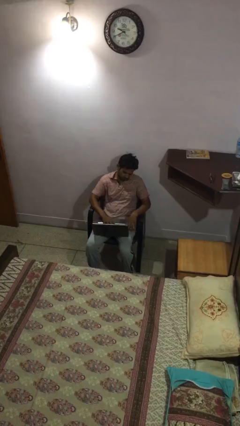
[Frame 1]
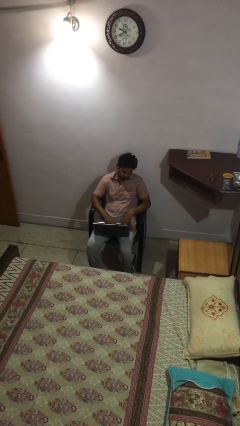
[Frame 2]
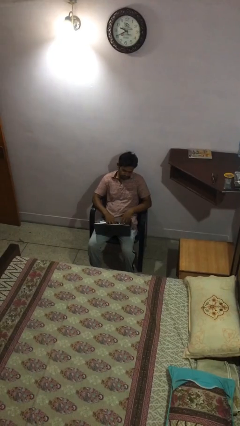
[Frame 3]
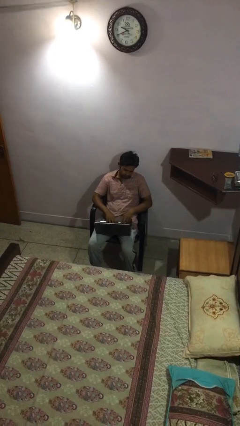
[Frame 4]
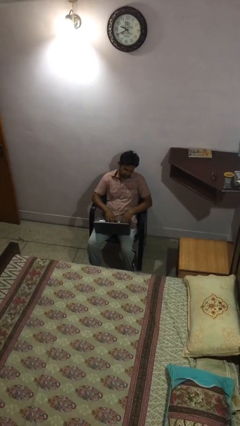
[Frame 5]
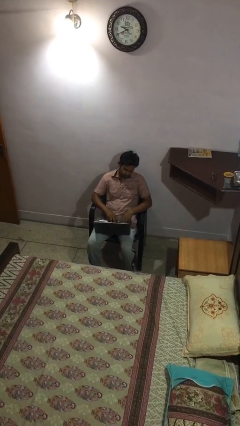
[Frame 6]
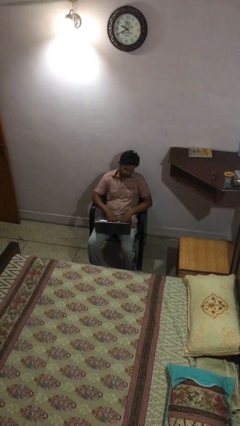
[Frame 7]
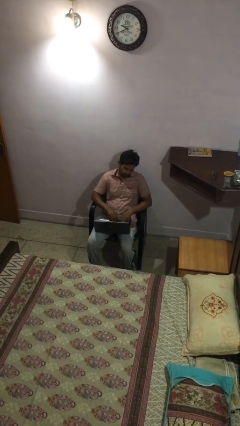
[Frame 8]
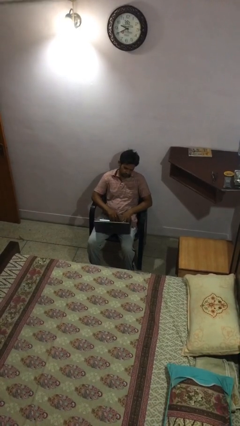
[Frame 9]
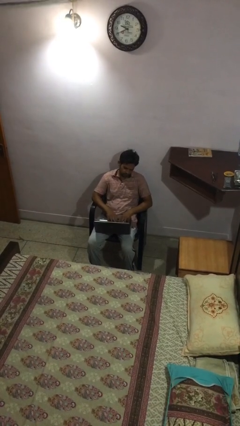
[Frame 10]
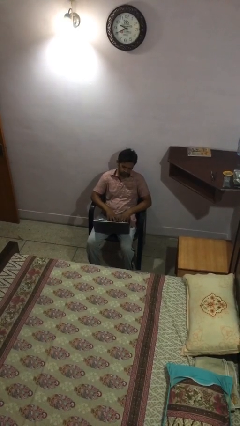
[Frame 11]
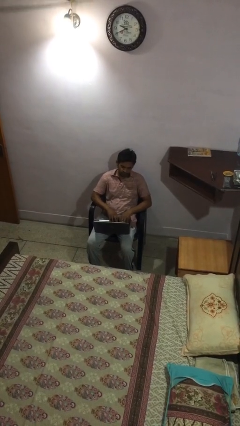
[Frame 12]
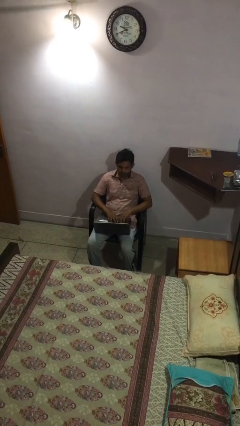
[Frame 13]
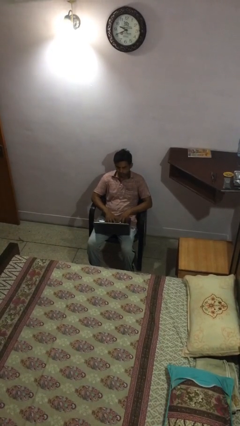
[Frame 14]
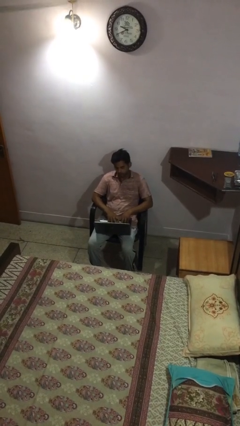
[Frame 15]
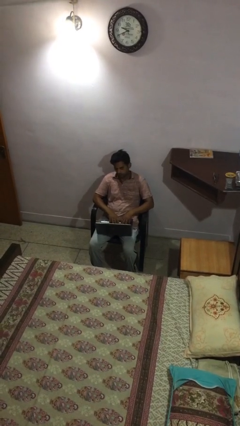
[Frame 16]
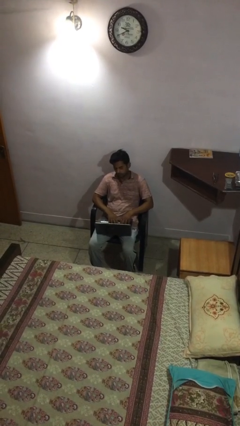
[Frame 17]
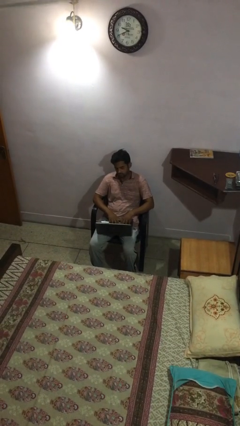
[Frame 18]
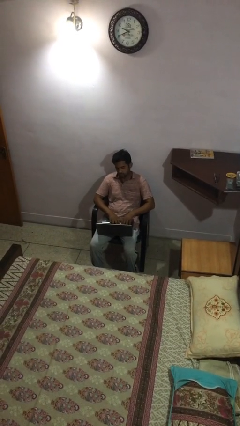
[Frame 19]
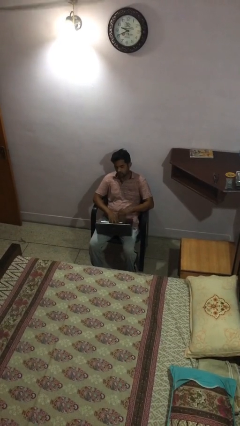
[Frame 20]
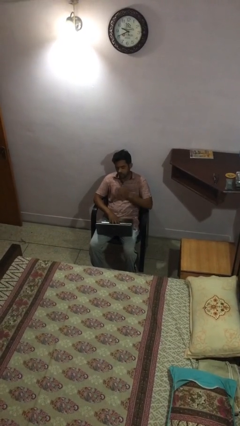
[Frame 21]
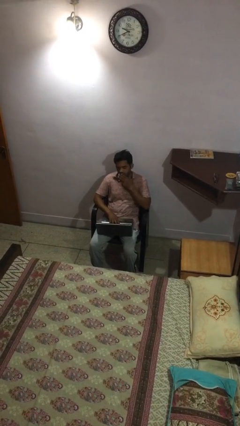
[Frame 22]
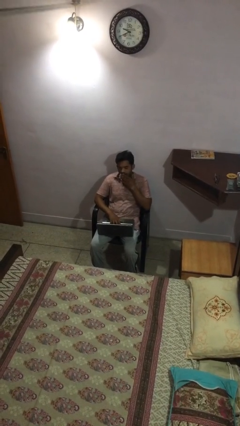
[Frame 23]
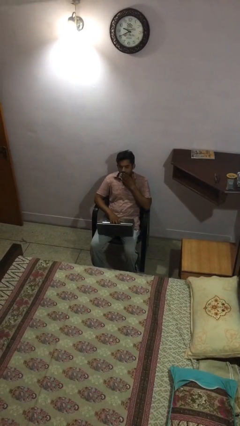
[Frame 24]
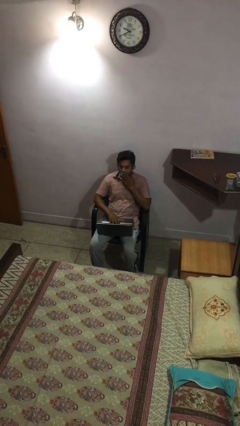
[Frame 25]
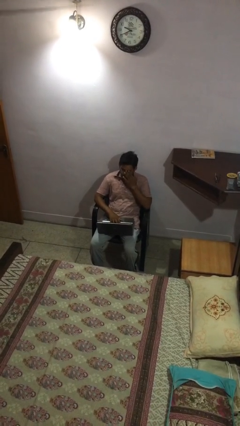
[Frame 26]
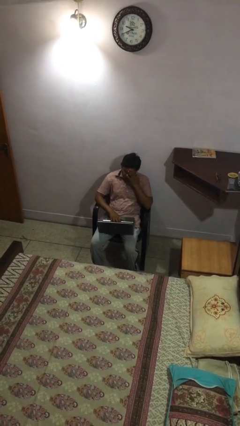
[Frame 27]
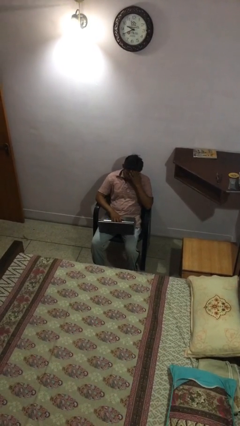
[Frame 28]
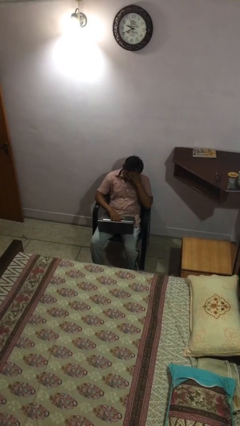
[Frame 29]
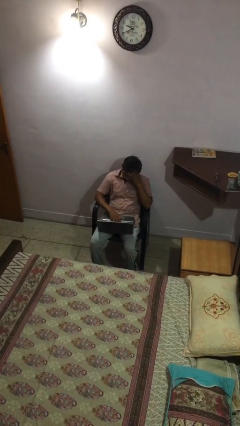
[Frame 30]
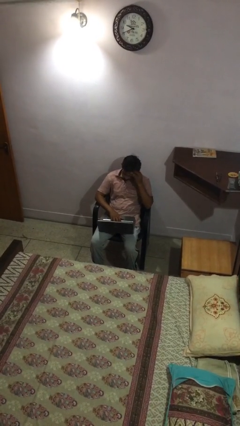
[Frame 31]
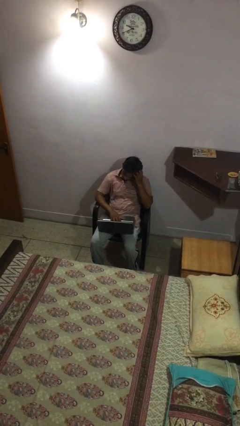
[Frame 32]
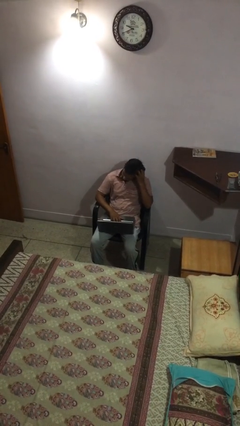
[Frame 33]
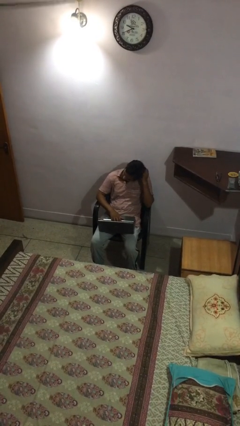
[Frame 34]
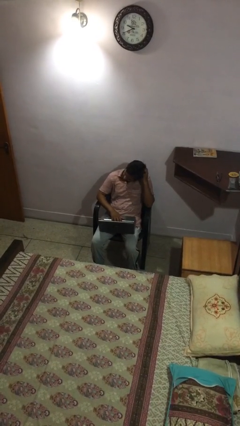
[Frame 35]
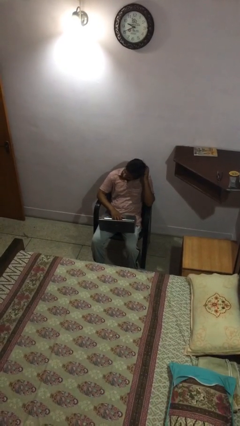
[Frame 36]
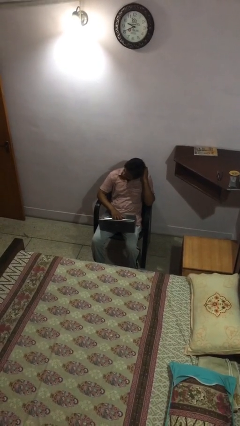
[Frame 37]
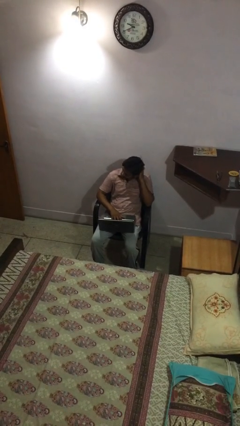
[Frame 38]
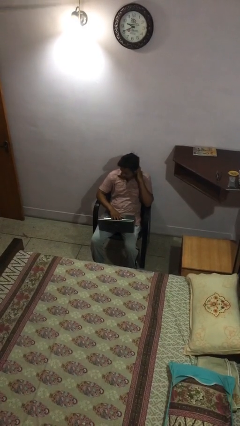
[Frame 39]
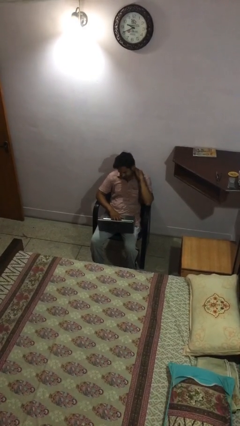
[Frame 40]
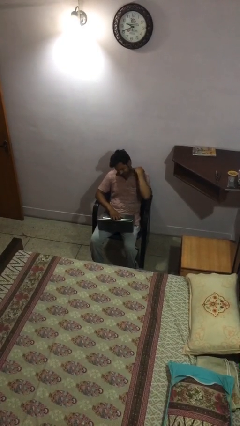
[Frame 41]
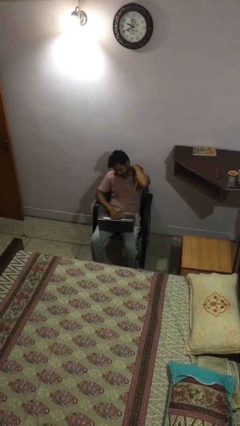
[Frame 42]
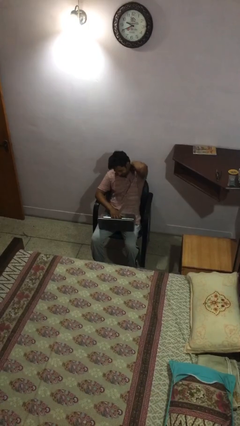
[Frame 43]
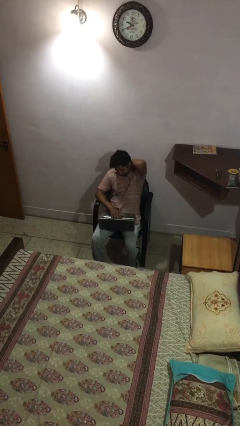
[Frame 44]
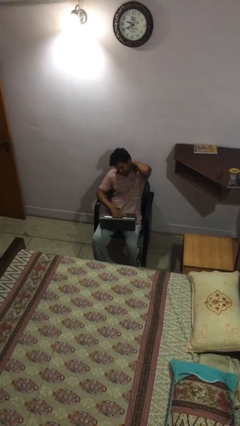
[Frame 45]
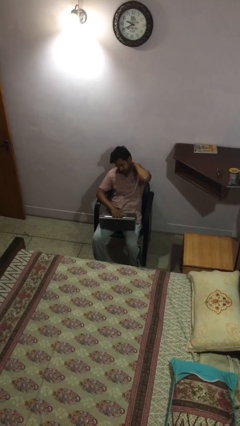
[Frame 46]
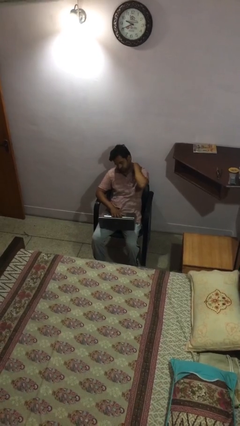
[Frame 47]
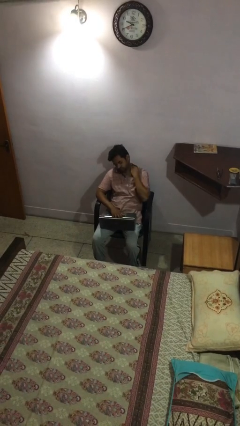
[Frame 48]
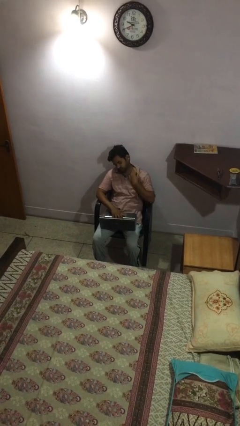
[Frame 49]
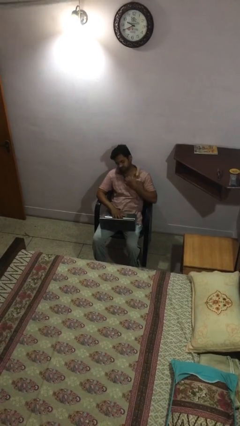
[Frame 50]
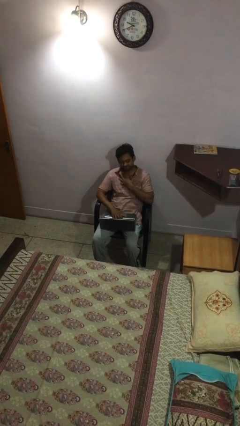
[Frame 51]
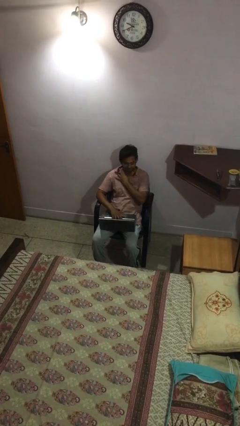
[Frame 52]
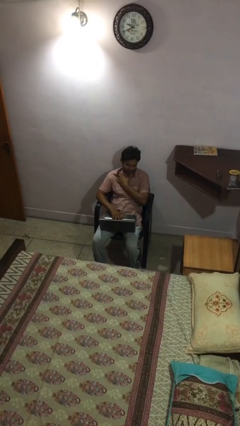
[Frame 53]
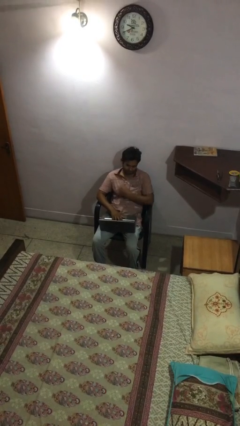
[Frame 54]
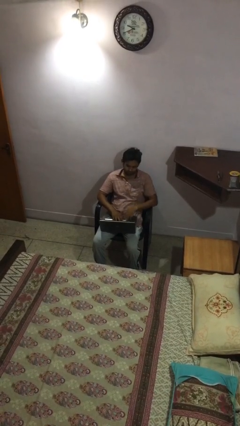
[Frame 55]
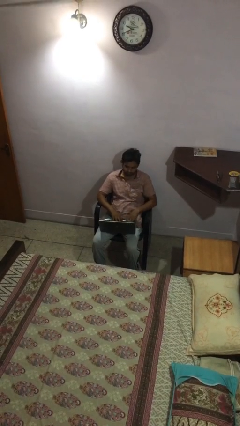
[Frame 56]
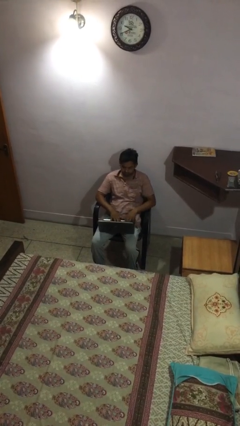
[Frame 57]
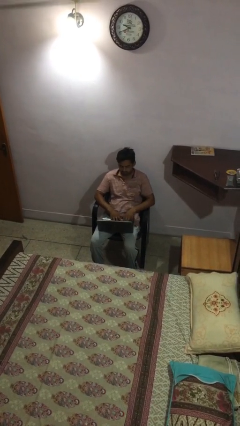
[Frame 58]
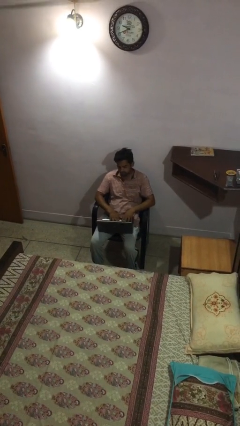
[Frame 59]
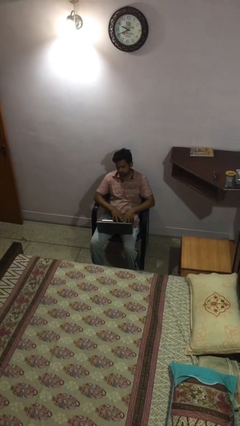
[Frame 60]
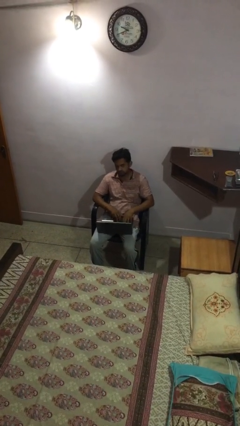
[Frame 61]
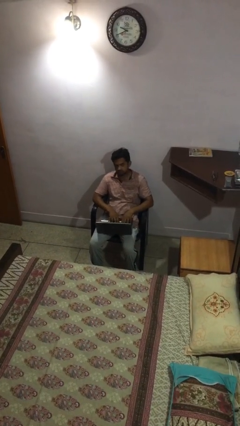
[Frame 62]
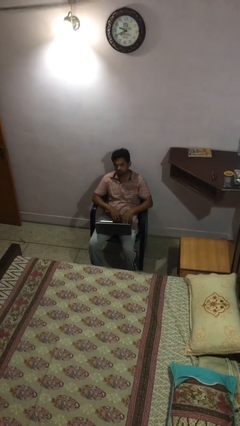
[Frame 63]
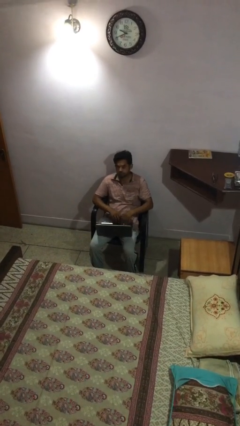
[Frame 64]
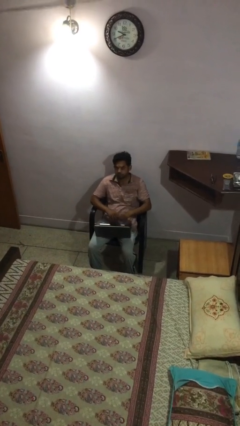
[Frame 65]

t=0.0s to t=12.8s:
person interacts with laptop

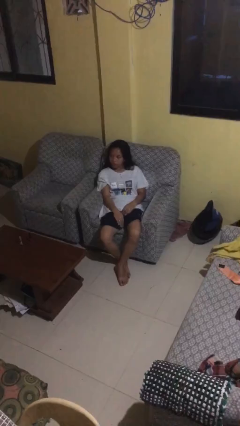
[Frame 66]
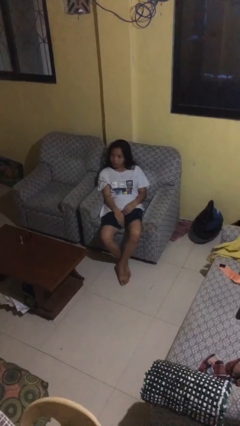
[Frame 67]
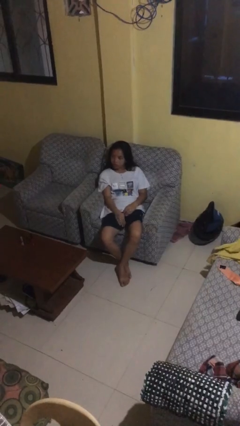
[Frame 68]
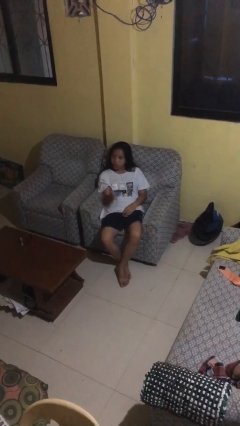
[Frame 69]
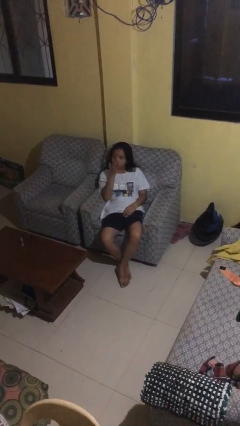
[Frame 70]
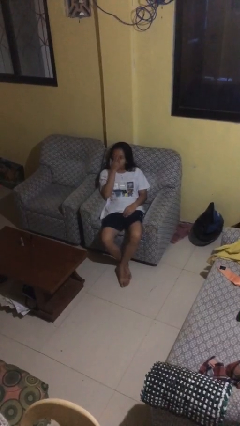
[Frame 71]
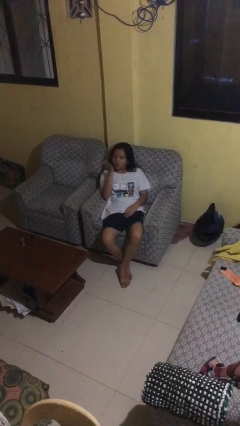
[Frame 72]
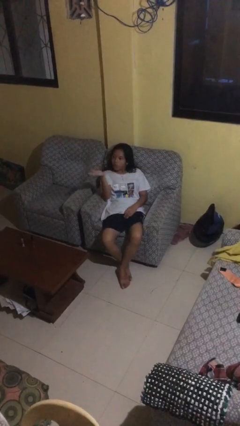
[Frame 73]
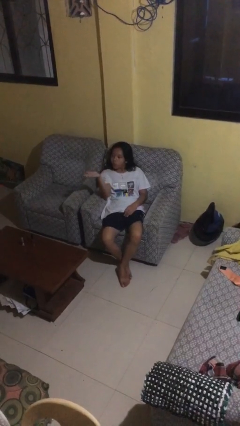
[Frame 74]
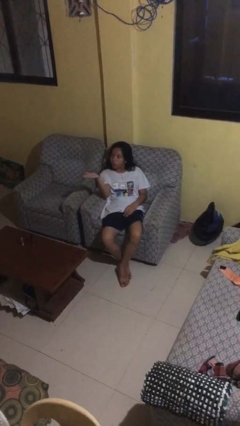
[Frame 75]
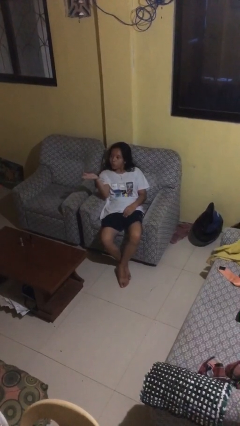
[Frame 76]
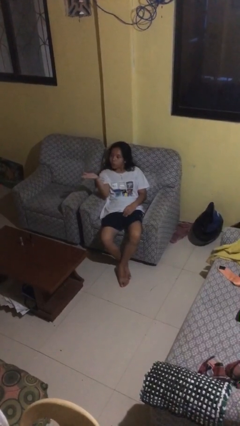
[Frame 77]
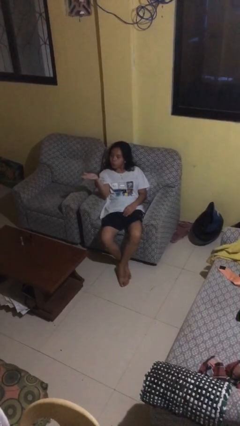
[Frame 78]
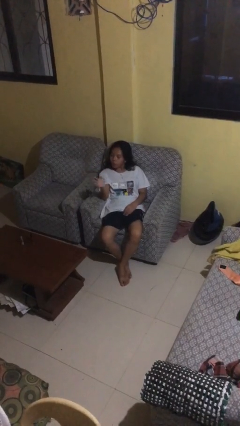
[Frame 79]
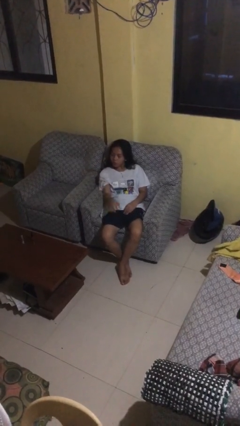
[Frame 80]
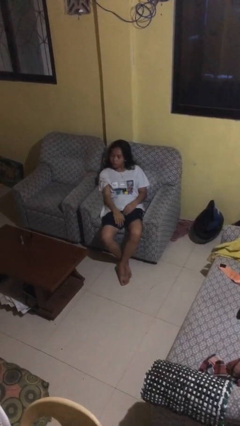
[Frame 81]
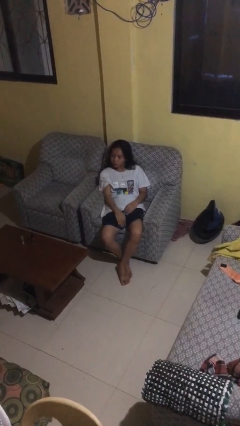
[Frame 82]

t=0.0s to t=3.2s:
person gestures blow kiss

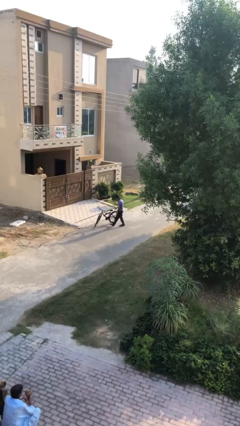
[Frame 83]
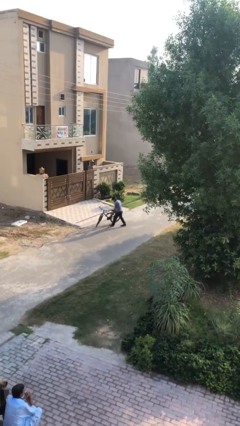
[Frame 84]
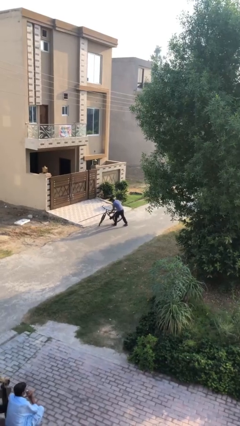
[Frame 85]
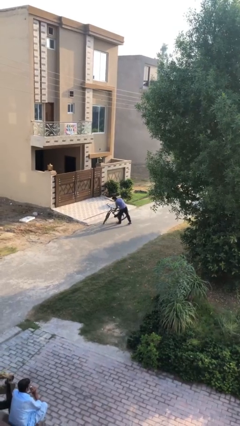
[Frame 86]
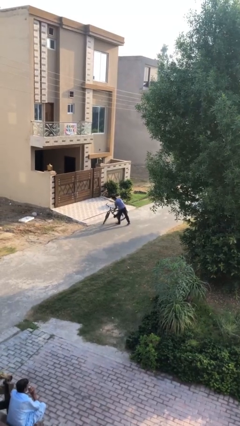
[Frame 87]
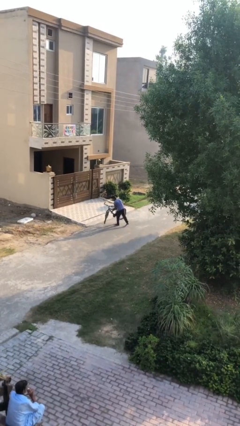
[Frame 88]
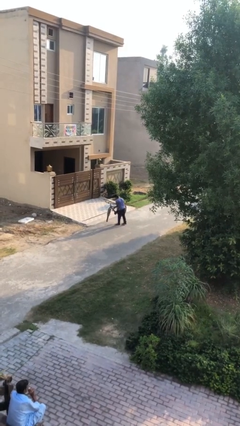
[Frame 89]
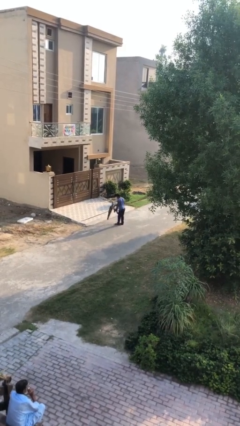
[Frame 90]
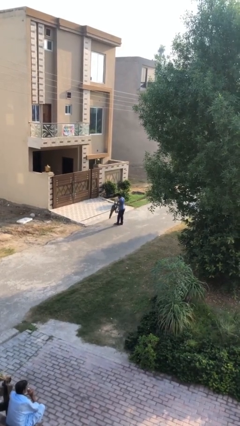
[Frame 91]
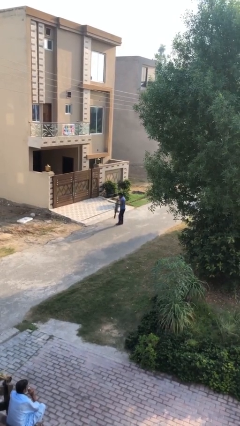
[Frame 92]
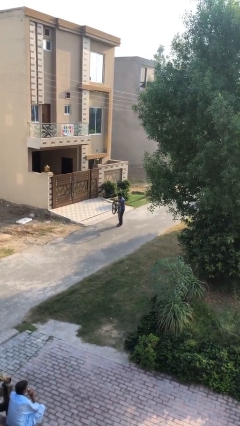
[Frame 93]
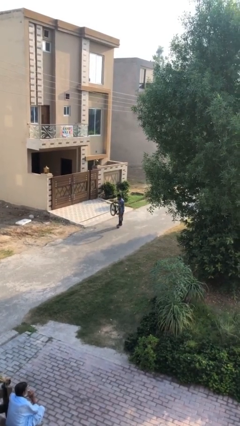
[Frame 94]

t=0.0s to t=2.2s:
person picks up object from floor
